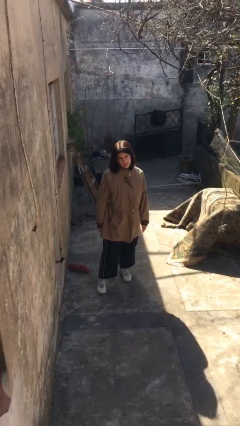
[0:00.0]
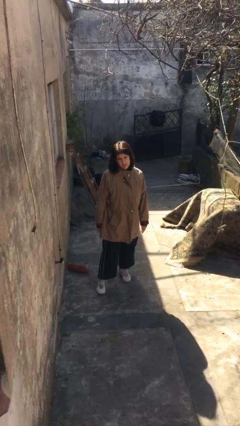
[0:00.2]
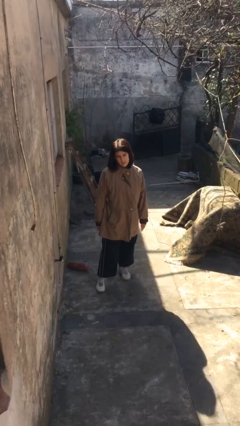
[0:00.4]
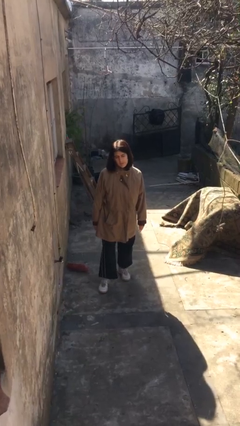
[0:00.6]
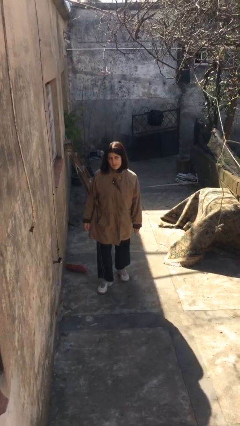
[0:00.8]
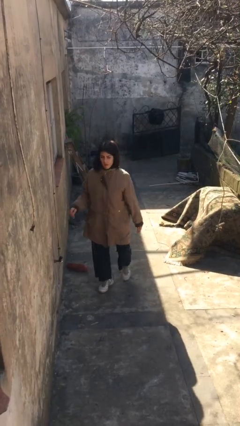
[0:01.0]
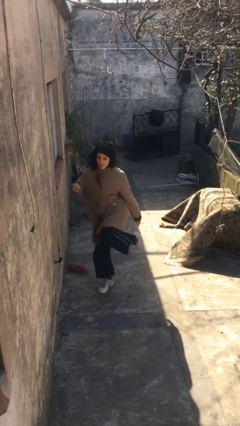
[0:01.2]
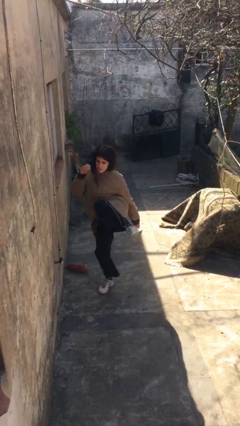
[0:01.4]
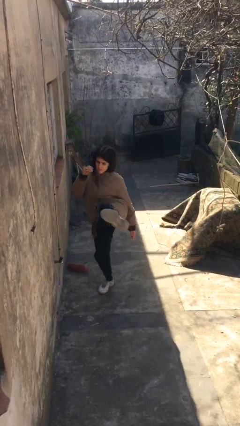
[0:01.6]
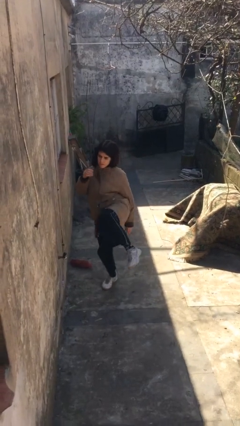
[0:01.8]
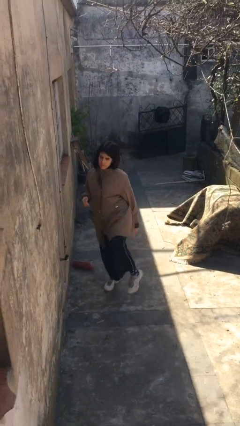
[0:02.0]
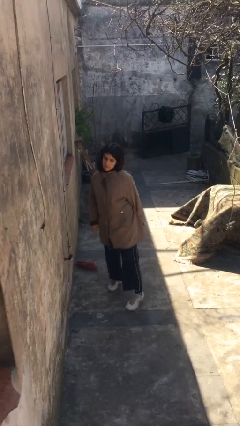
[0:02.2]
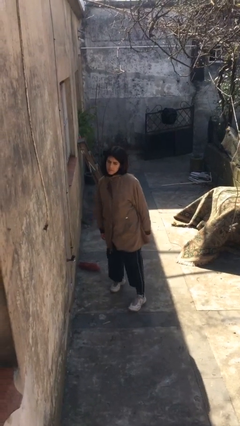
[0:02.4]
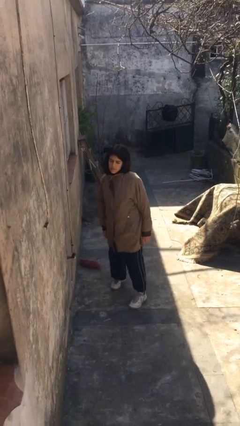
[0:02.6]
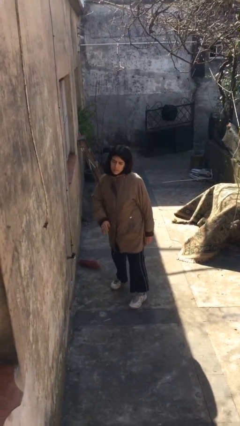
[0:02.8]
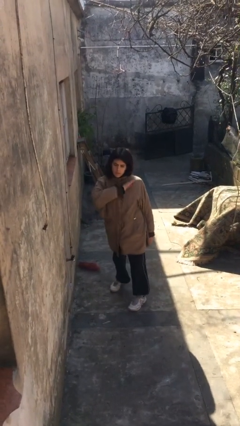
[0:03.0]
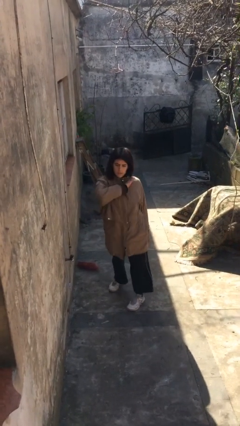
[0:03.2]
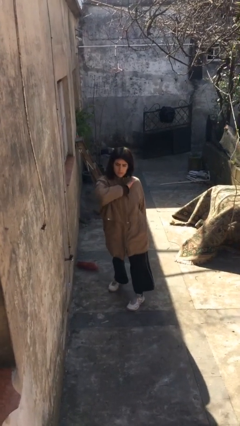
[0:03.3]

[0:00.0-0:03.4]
person karate kicks

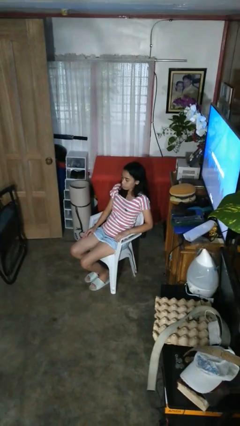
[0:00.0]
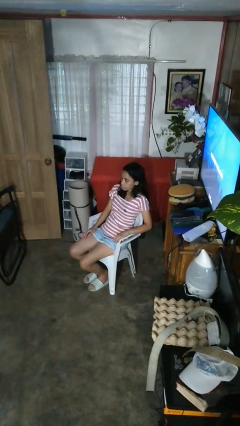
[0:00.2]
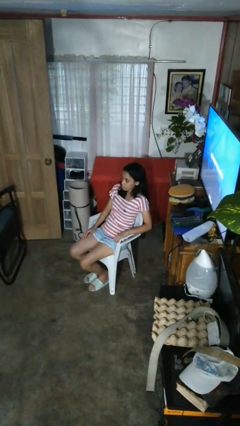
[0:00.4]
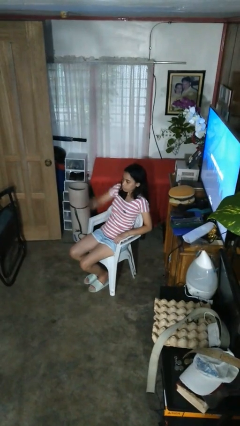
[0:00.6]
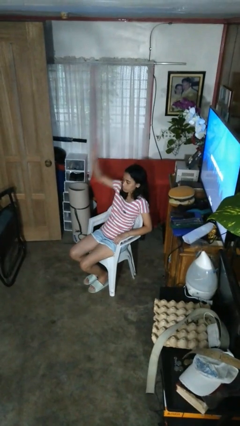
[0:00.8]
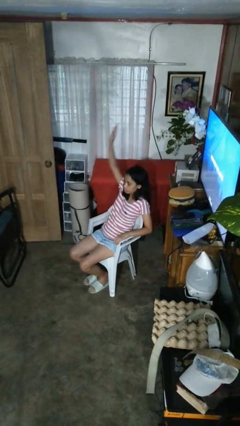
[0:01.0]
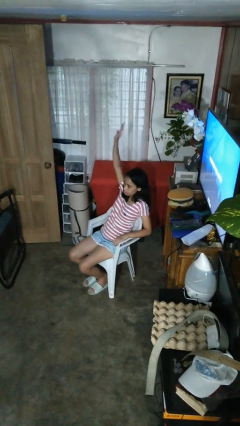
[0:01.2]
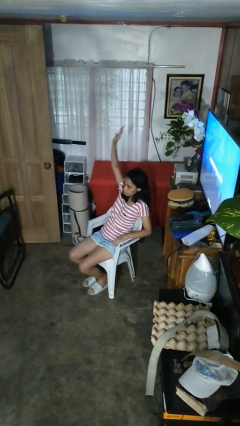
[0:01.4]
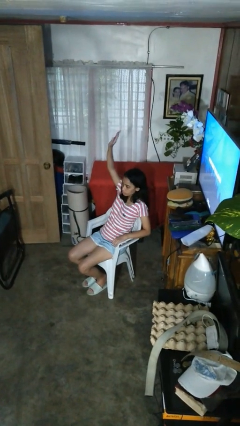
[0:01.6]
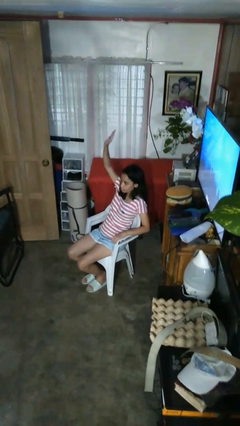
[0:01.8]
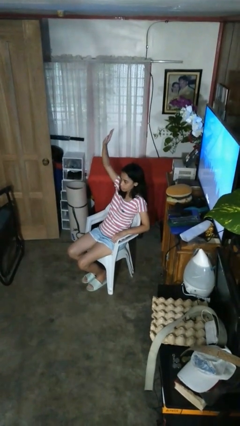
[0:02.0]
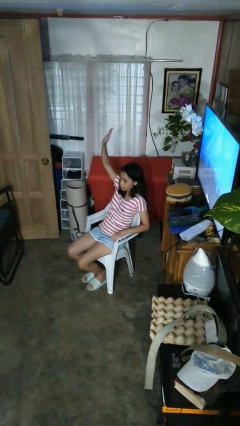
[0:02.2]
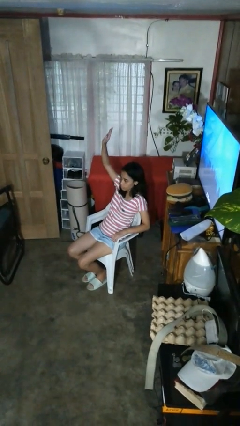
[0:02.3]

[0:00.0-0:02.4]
person gestures raise hand

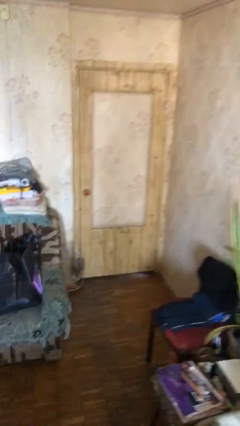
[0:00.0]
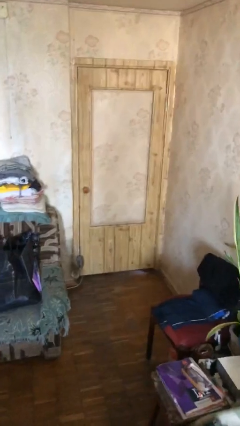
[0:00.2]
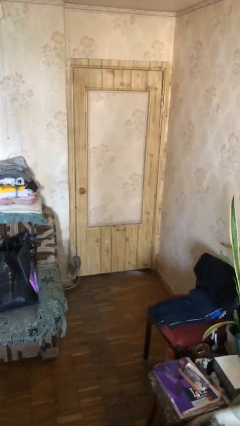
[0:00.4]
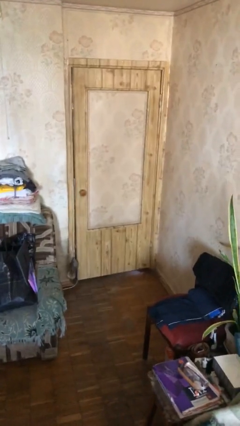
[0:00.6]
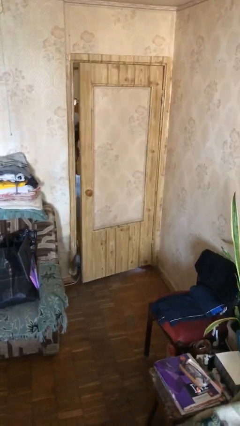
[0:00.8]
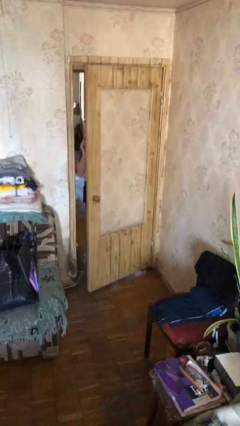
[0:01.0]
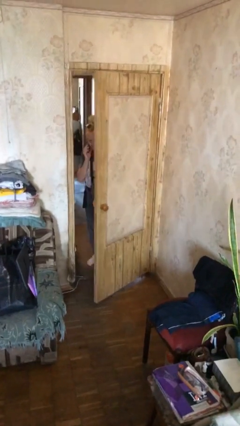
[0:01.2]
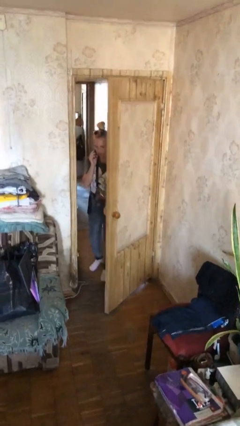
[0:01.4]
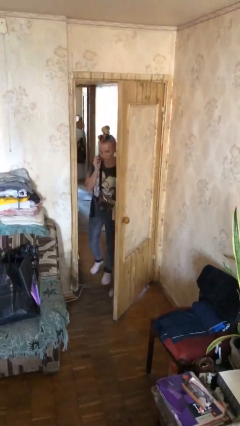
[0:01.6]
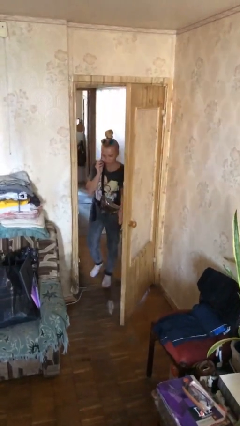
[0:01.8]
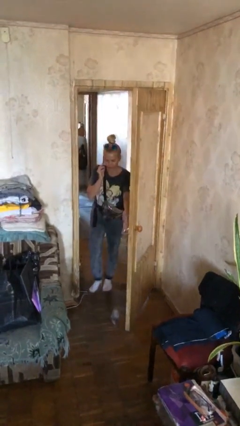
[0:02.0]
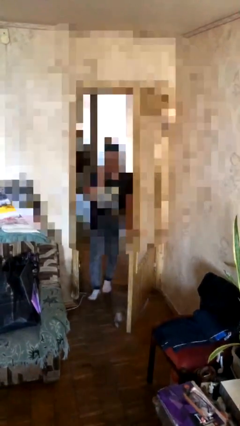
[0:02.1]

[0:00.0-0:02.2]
person opens facility door

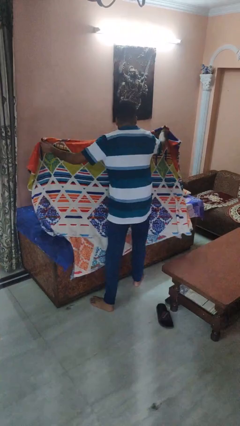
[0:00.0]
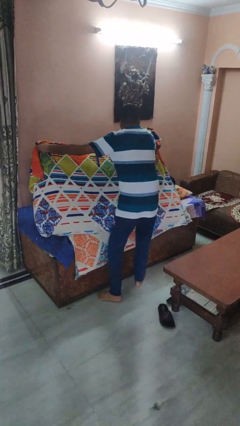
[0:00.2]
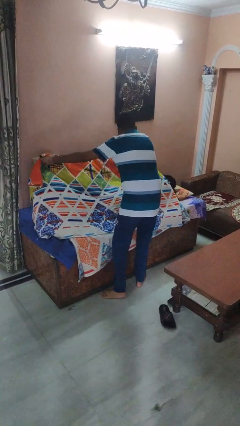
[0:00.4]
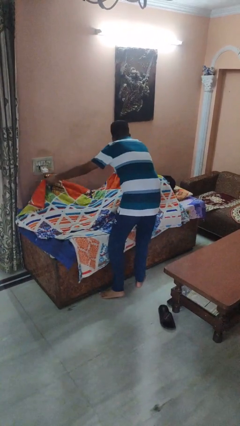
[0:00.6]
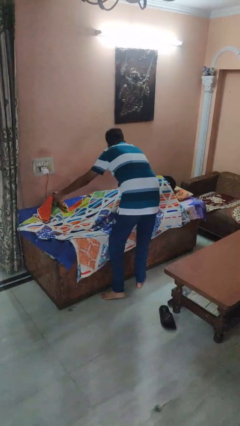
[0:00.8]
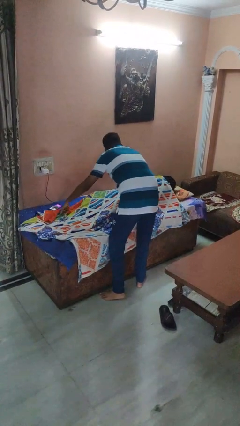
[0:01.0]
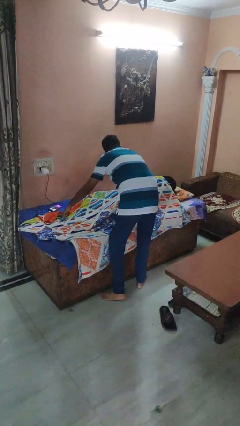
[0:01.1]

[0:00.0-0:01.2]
person covers friend with blanket

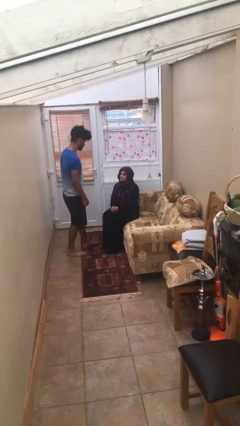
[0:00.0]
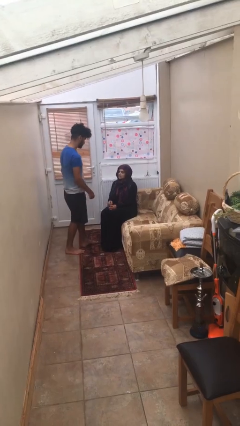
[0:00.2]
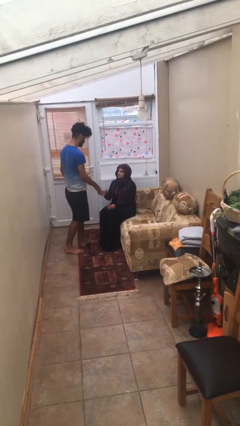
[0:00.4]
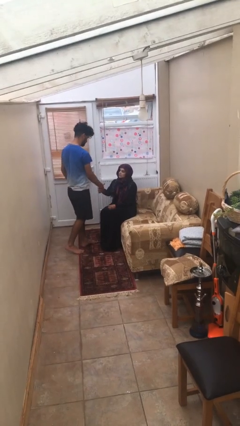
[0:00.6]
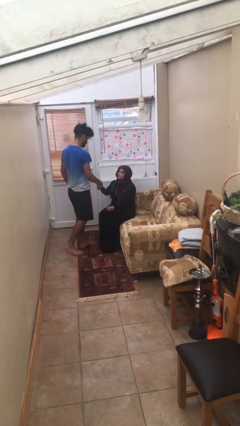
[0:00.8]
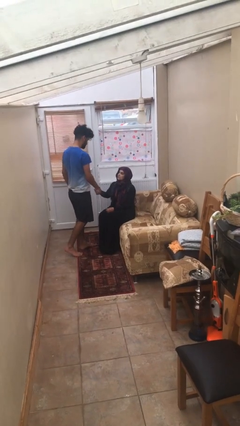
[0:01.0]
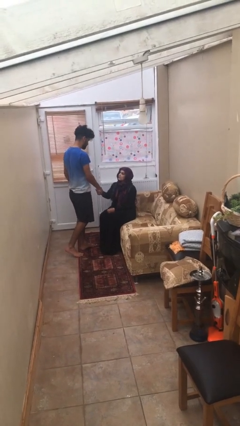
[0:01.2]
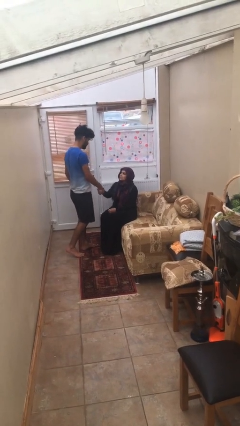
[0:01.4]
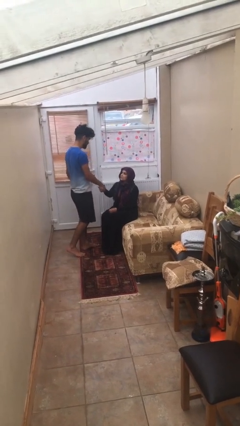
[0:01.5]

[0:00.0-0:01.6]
person shakes hand

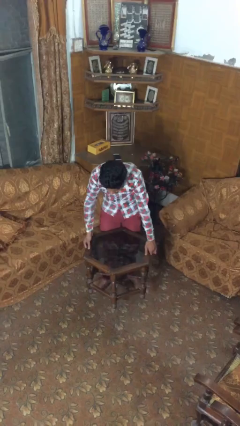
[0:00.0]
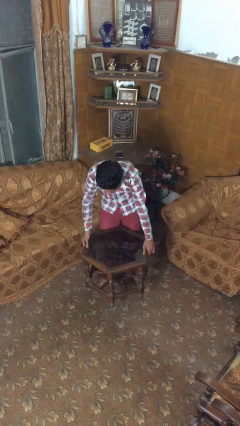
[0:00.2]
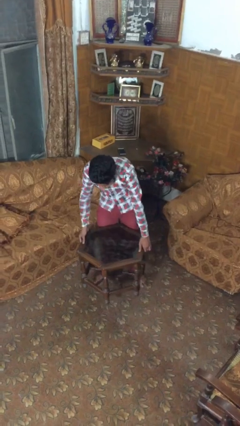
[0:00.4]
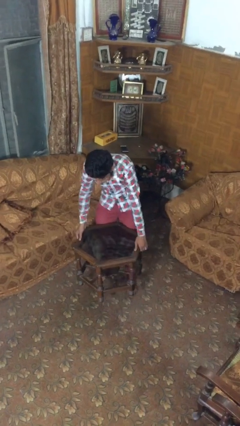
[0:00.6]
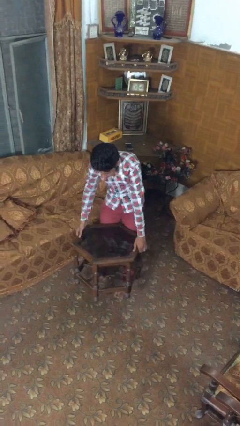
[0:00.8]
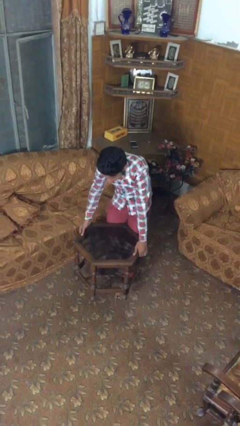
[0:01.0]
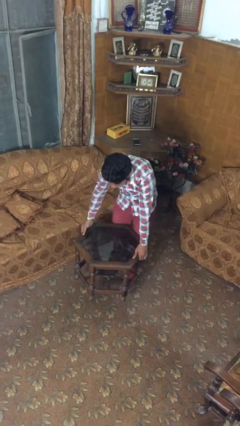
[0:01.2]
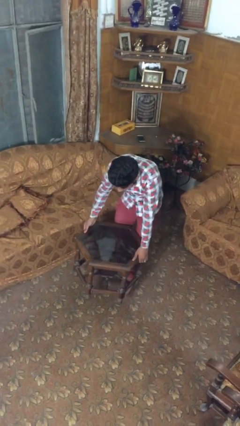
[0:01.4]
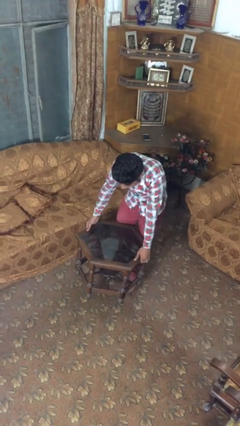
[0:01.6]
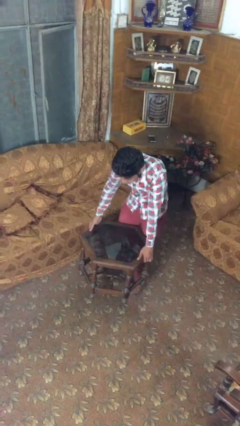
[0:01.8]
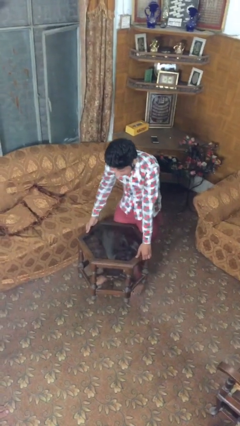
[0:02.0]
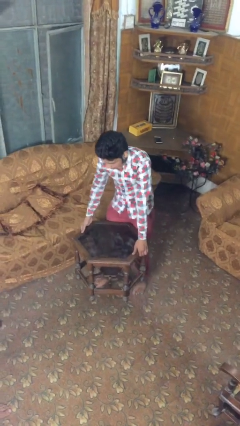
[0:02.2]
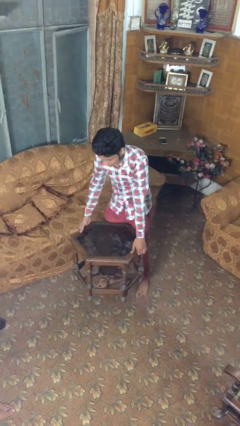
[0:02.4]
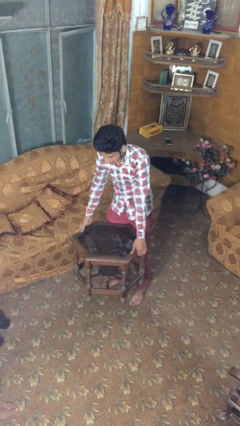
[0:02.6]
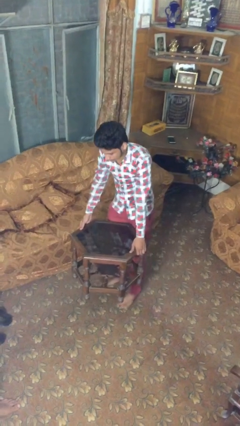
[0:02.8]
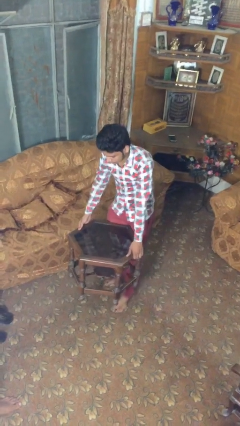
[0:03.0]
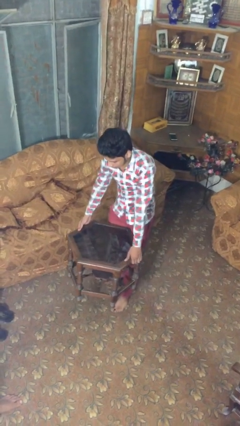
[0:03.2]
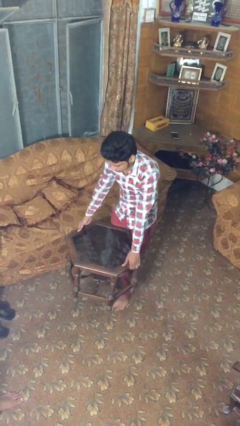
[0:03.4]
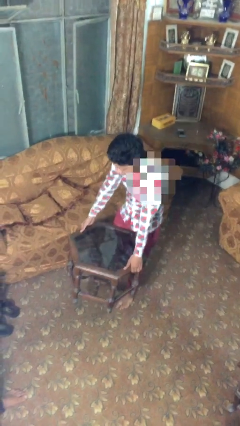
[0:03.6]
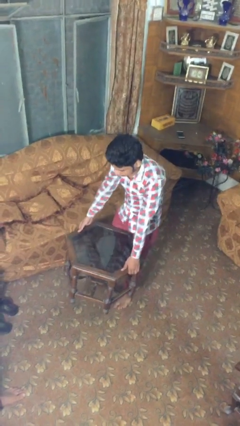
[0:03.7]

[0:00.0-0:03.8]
person carries heavy object

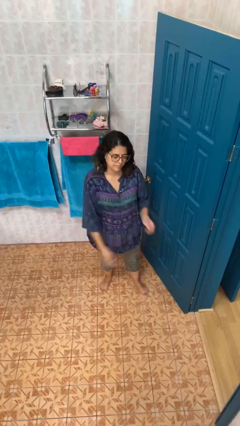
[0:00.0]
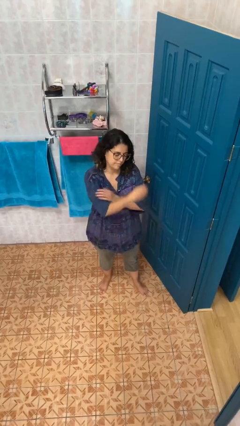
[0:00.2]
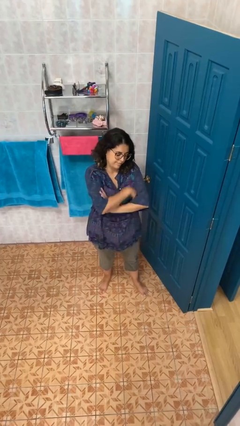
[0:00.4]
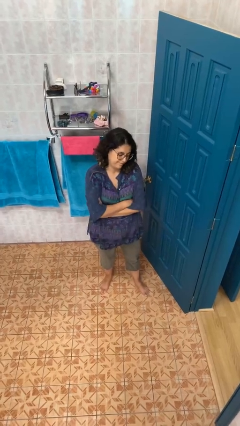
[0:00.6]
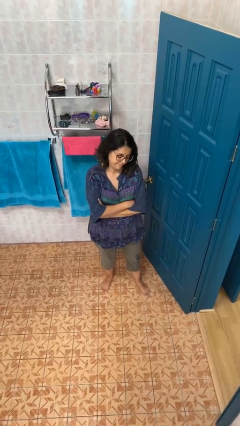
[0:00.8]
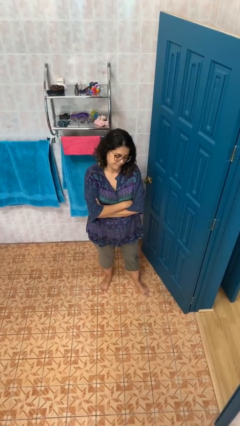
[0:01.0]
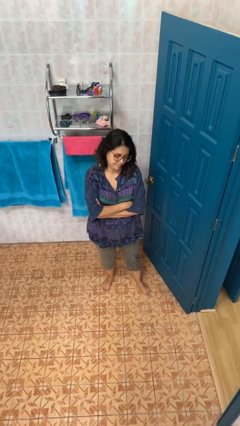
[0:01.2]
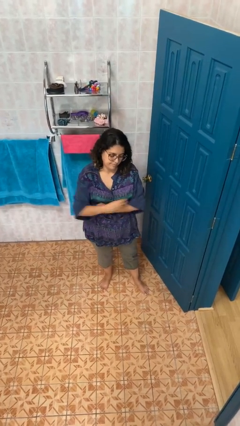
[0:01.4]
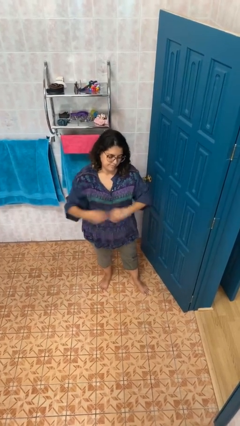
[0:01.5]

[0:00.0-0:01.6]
person crosses arms

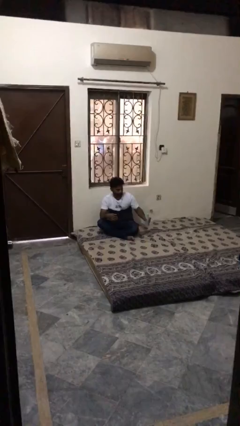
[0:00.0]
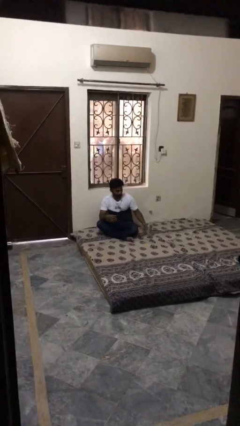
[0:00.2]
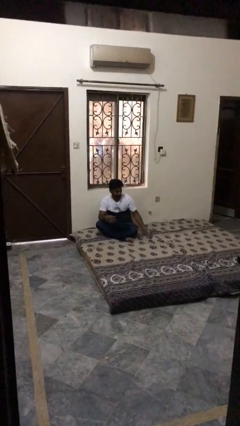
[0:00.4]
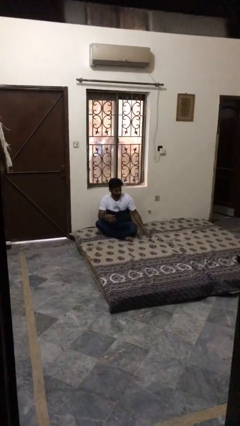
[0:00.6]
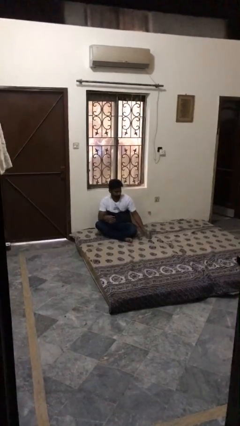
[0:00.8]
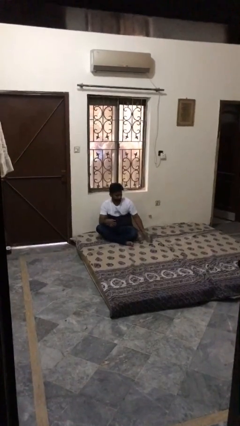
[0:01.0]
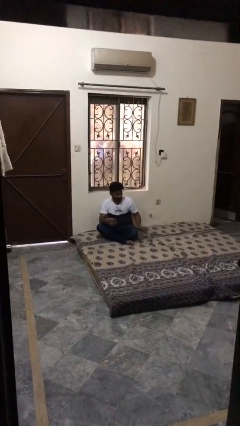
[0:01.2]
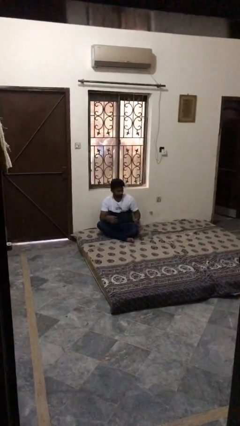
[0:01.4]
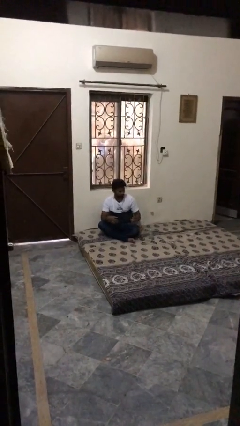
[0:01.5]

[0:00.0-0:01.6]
person puts down object on floor
